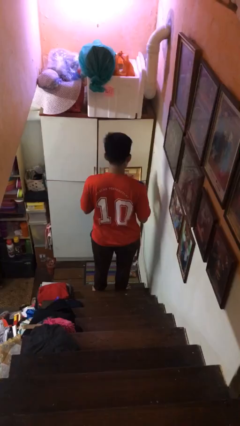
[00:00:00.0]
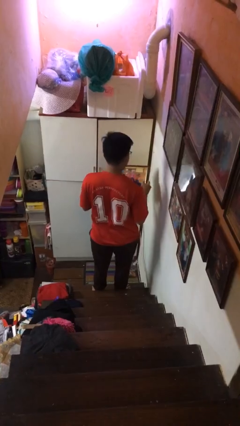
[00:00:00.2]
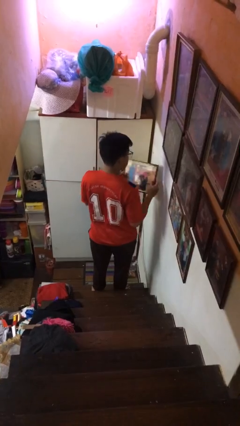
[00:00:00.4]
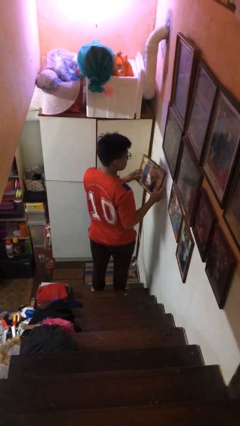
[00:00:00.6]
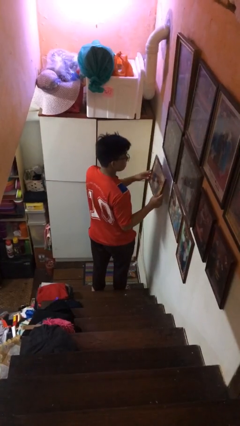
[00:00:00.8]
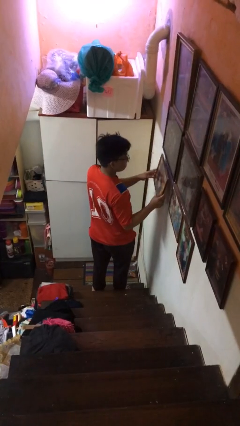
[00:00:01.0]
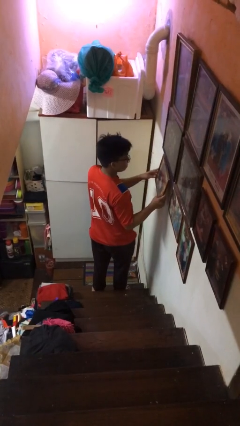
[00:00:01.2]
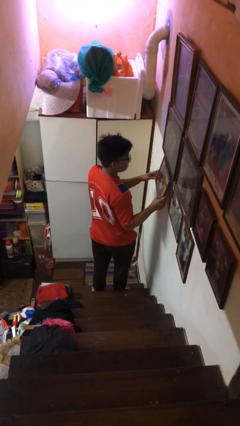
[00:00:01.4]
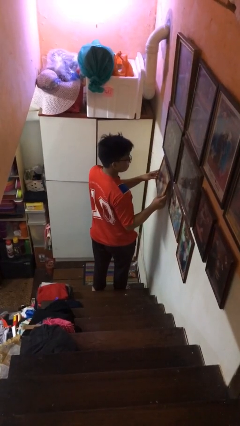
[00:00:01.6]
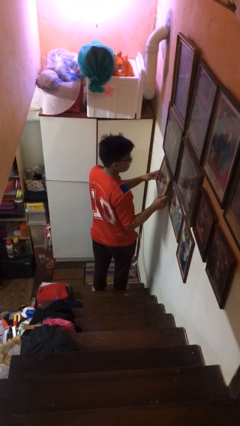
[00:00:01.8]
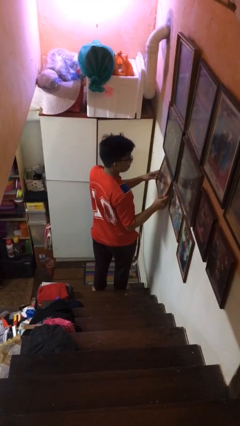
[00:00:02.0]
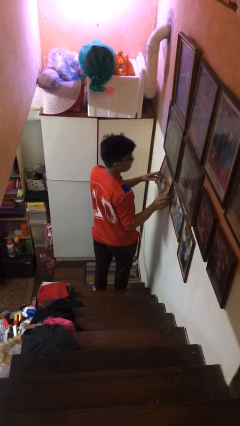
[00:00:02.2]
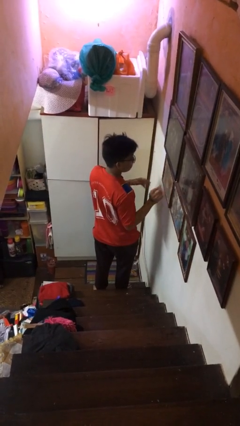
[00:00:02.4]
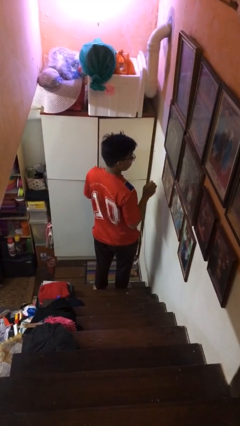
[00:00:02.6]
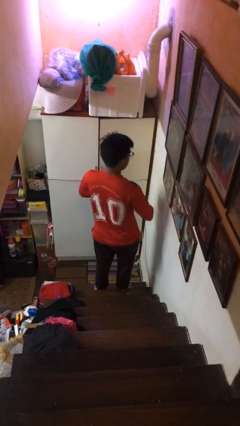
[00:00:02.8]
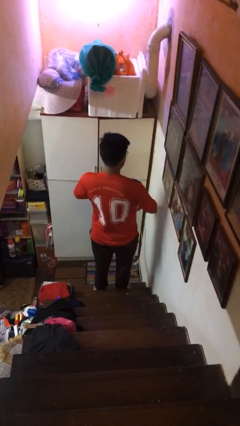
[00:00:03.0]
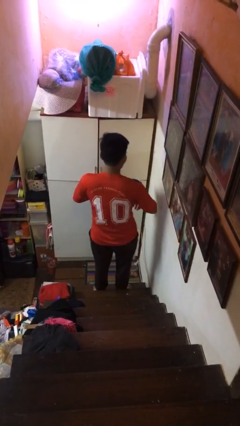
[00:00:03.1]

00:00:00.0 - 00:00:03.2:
person puts up picture frame

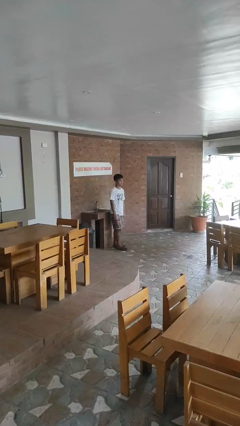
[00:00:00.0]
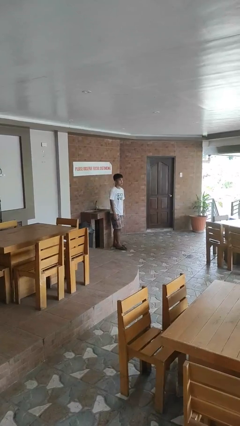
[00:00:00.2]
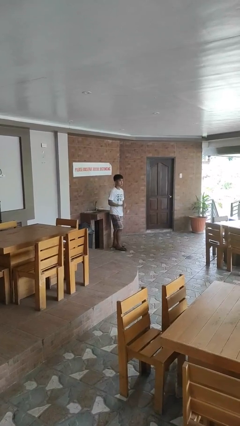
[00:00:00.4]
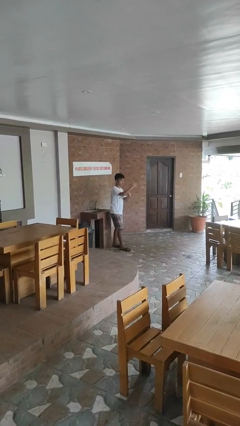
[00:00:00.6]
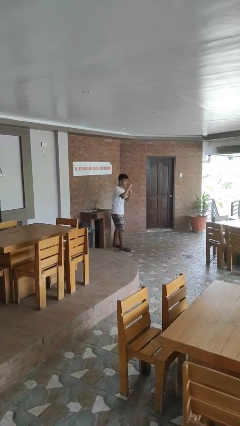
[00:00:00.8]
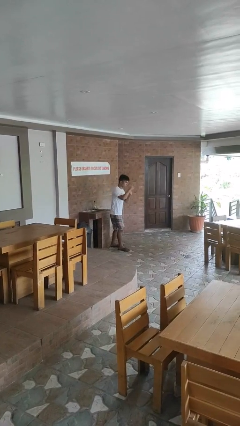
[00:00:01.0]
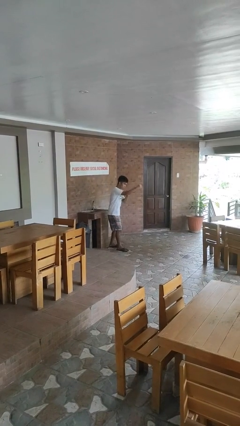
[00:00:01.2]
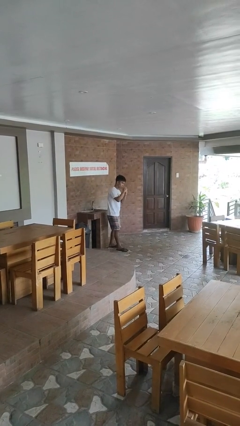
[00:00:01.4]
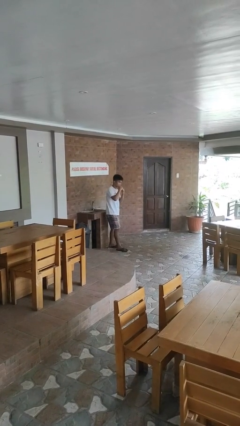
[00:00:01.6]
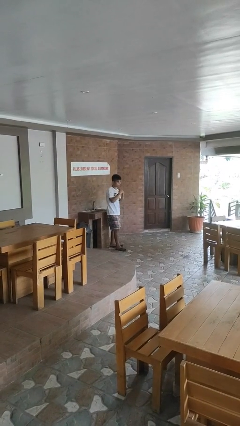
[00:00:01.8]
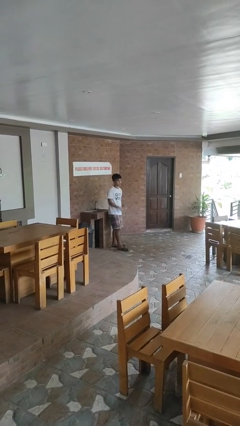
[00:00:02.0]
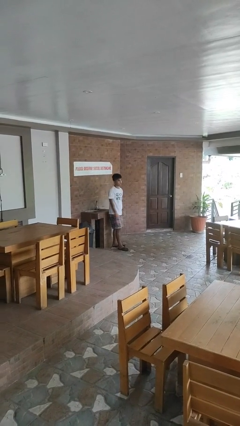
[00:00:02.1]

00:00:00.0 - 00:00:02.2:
person punches

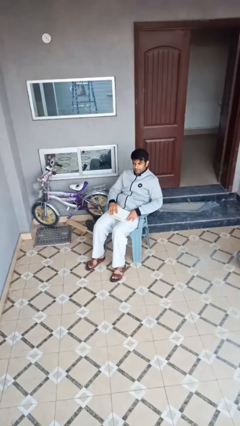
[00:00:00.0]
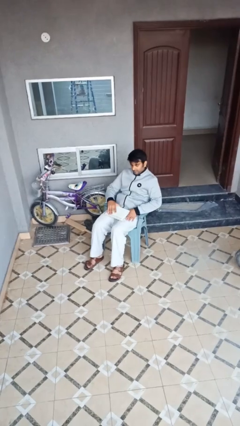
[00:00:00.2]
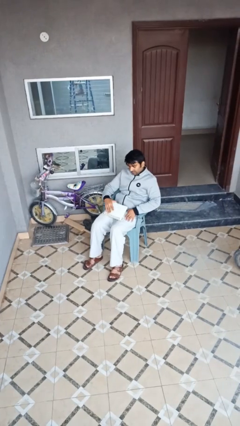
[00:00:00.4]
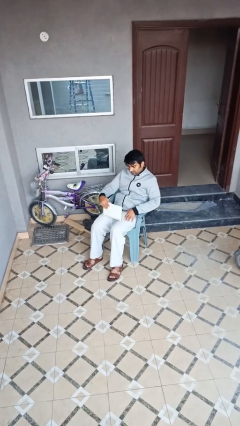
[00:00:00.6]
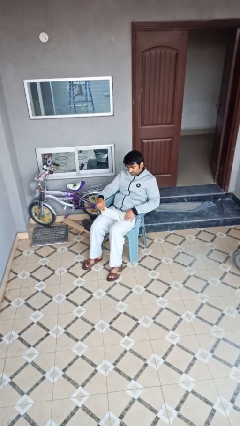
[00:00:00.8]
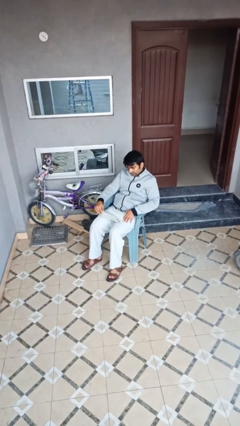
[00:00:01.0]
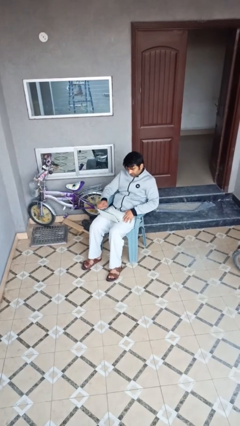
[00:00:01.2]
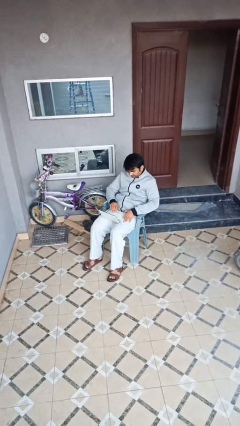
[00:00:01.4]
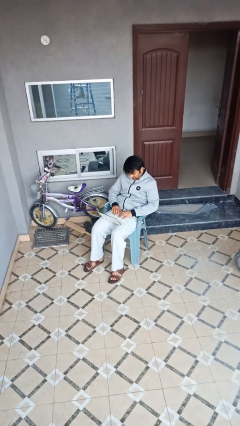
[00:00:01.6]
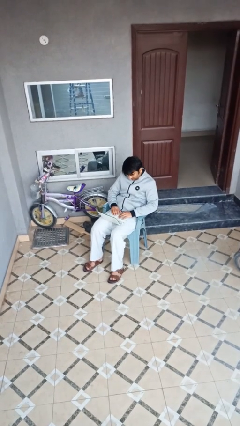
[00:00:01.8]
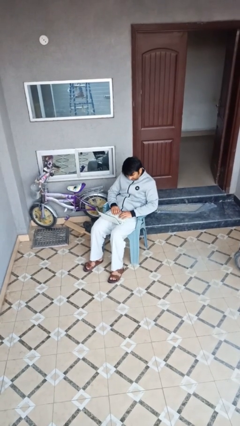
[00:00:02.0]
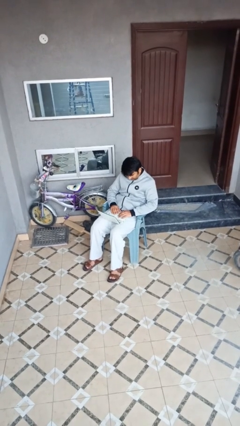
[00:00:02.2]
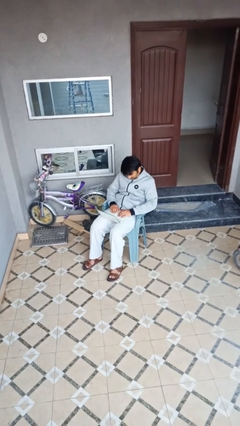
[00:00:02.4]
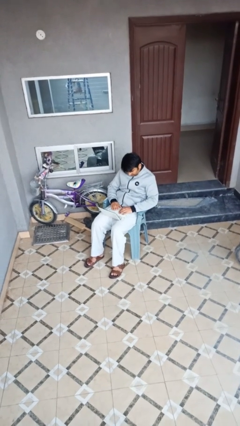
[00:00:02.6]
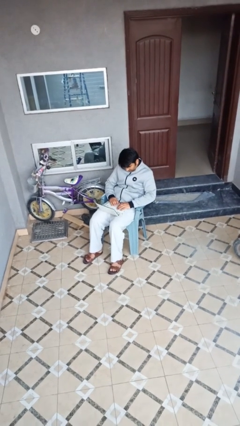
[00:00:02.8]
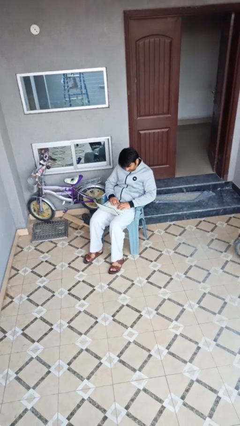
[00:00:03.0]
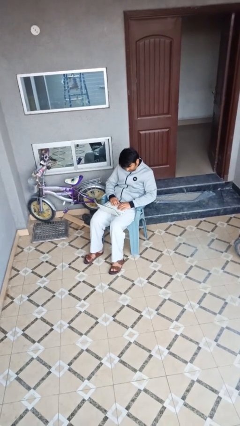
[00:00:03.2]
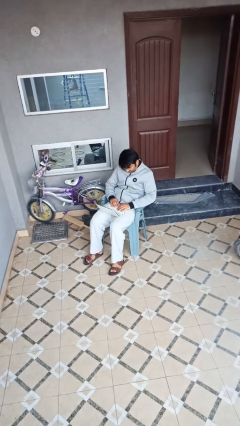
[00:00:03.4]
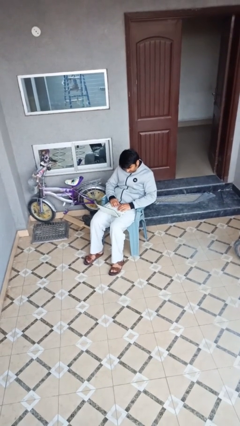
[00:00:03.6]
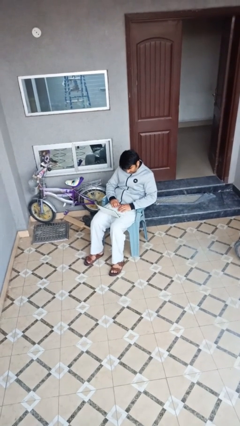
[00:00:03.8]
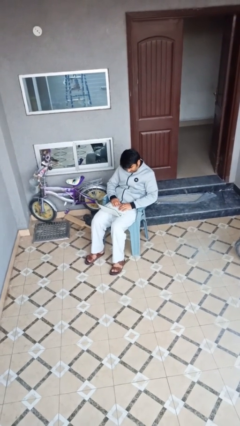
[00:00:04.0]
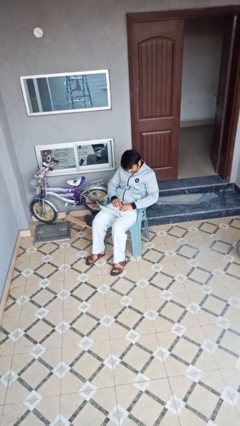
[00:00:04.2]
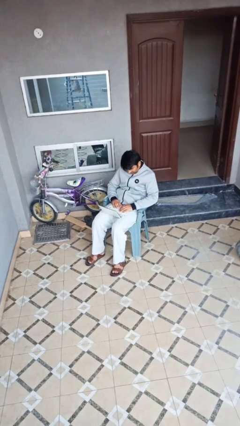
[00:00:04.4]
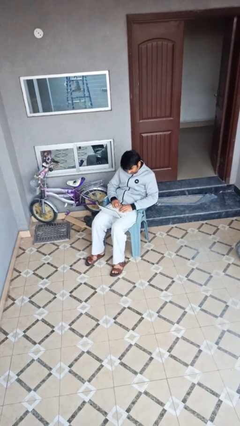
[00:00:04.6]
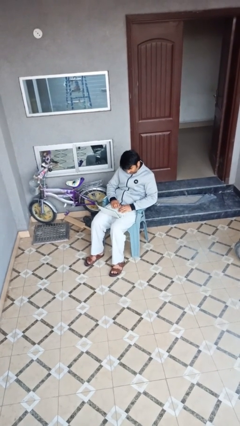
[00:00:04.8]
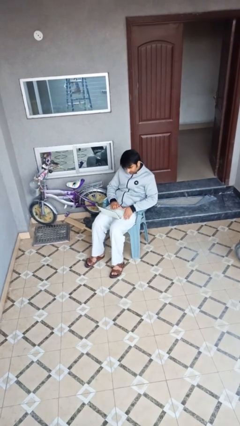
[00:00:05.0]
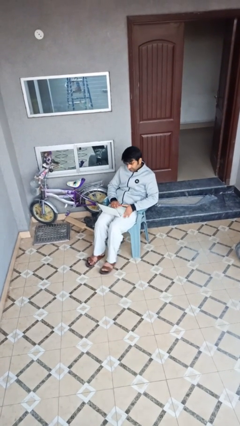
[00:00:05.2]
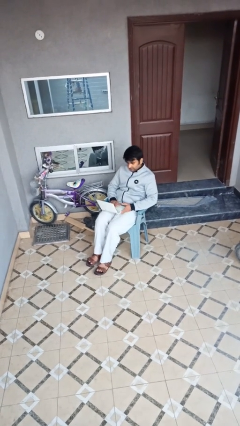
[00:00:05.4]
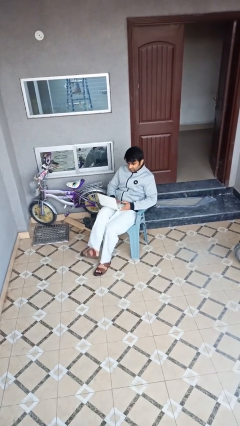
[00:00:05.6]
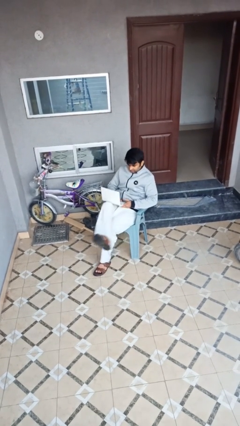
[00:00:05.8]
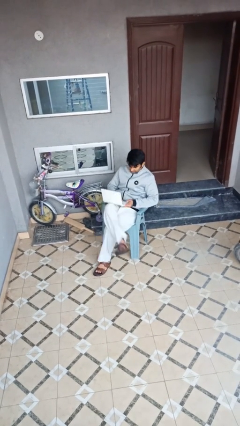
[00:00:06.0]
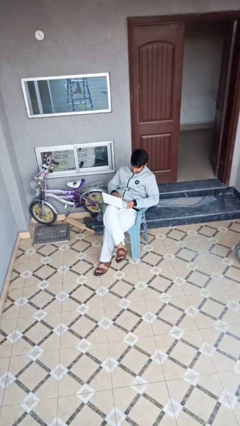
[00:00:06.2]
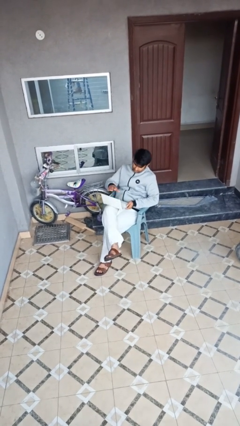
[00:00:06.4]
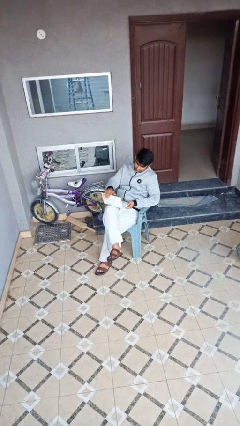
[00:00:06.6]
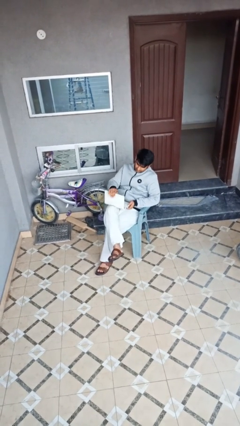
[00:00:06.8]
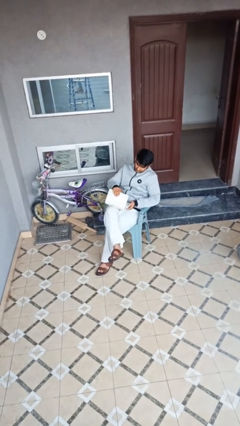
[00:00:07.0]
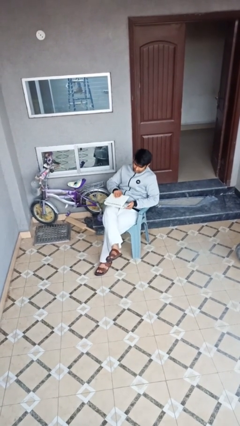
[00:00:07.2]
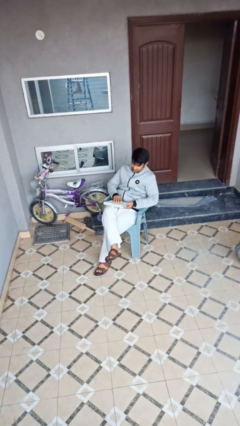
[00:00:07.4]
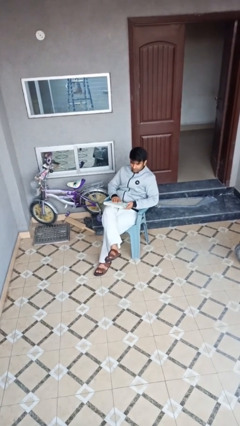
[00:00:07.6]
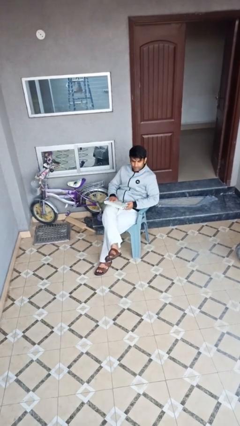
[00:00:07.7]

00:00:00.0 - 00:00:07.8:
person interacts with laptop

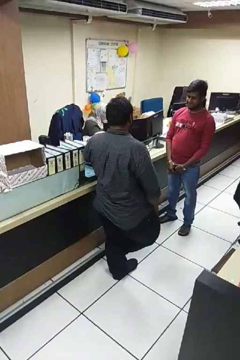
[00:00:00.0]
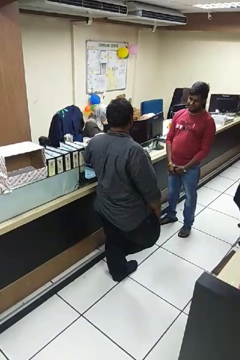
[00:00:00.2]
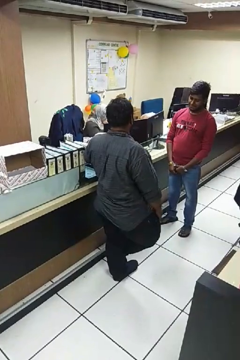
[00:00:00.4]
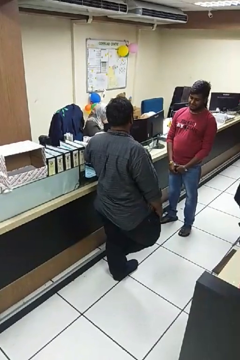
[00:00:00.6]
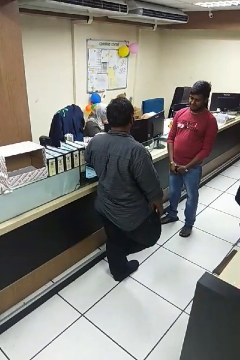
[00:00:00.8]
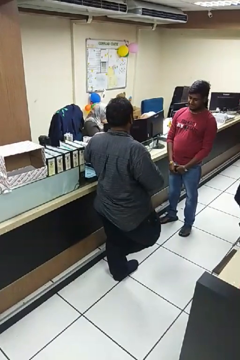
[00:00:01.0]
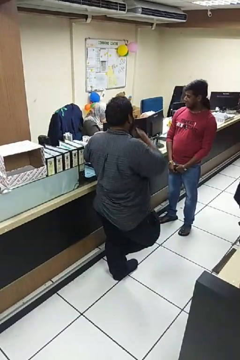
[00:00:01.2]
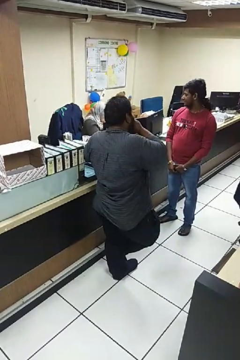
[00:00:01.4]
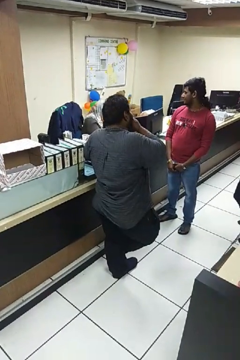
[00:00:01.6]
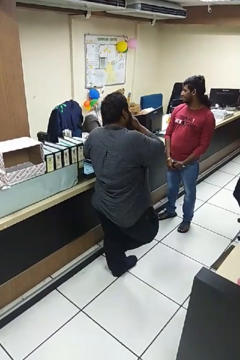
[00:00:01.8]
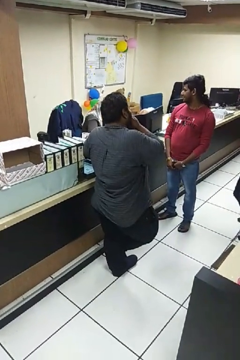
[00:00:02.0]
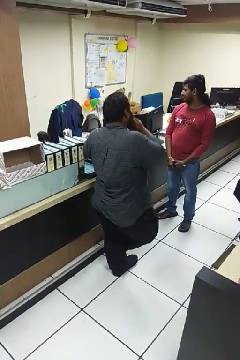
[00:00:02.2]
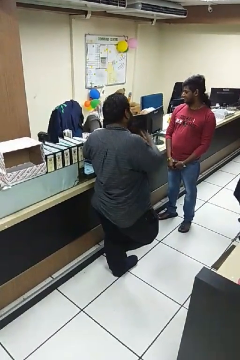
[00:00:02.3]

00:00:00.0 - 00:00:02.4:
person laughs with person

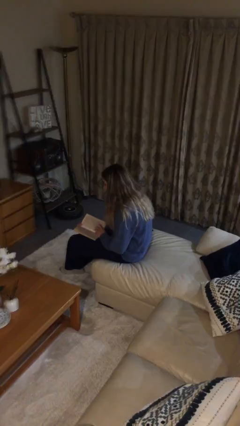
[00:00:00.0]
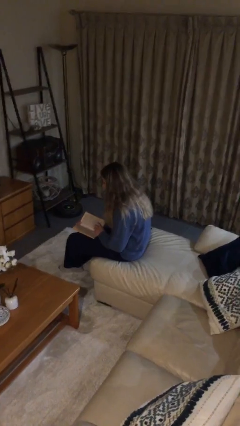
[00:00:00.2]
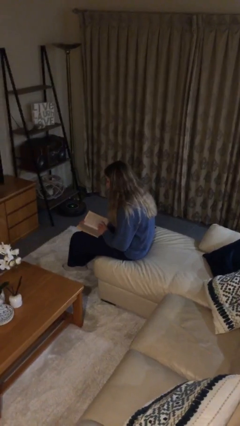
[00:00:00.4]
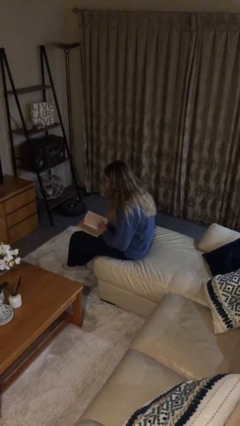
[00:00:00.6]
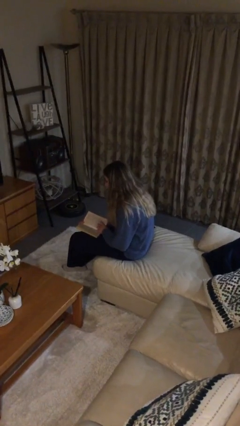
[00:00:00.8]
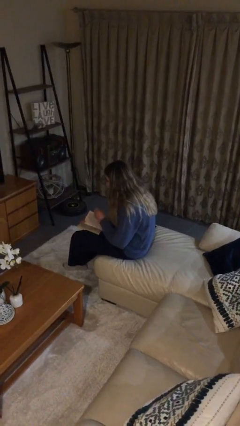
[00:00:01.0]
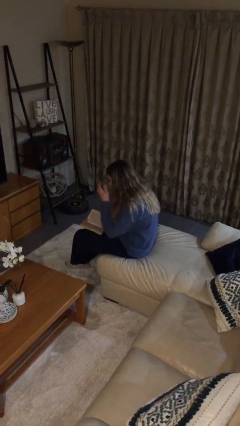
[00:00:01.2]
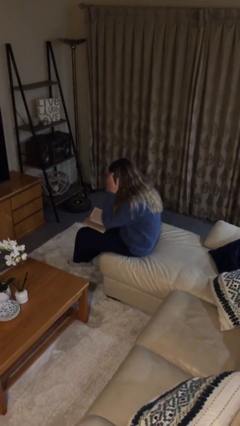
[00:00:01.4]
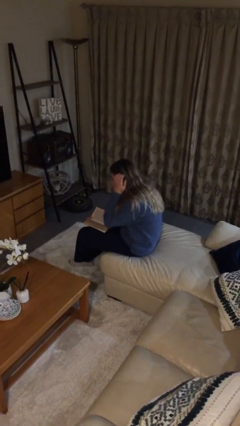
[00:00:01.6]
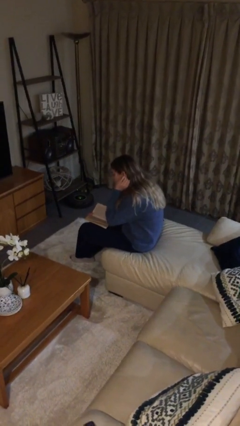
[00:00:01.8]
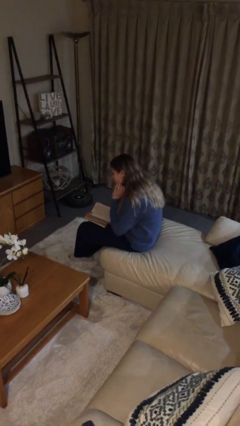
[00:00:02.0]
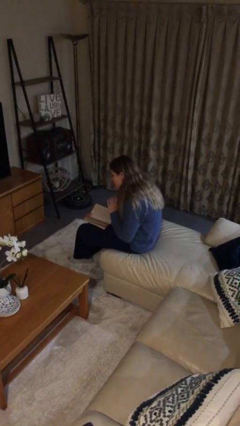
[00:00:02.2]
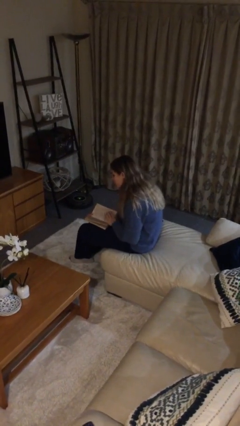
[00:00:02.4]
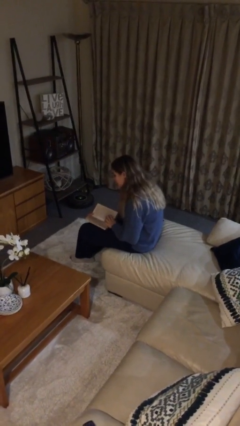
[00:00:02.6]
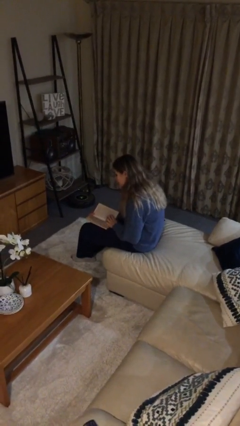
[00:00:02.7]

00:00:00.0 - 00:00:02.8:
person reads document
